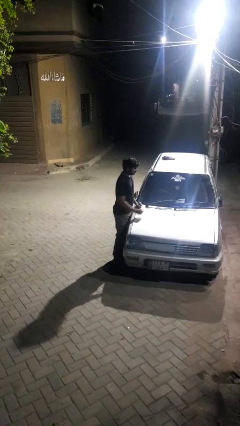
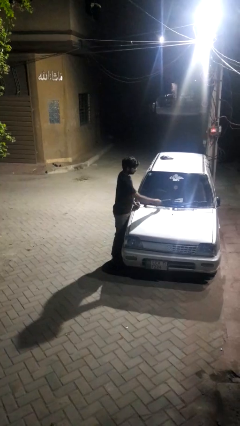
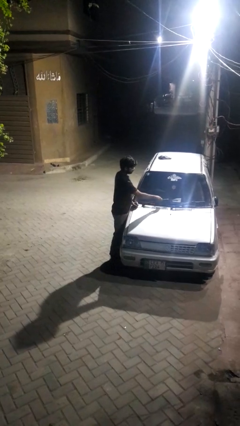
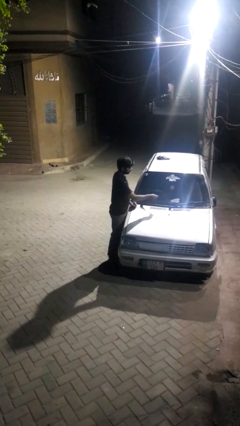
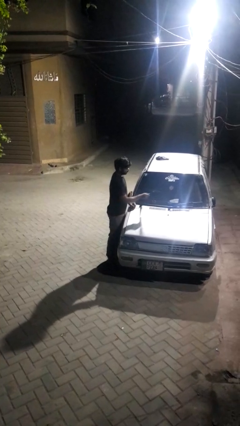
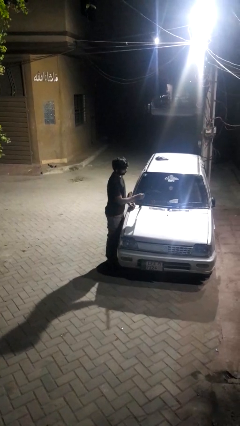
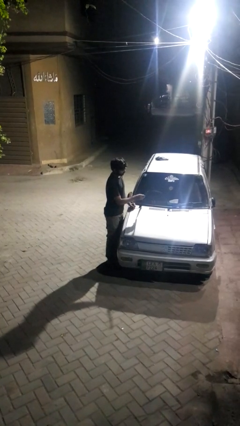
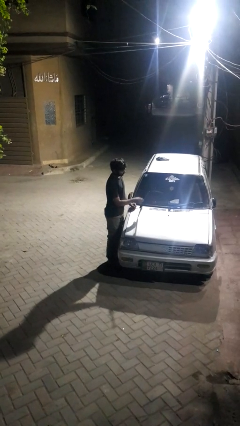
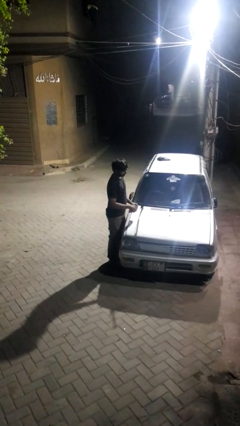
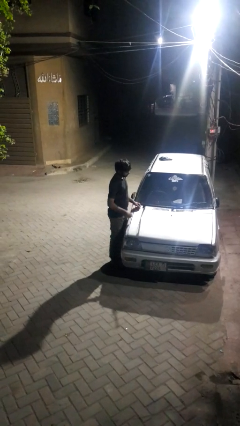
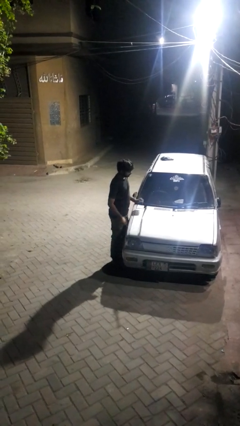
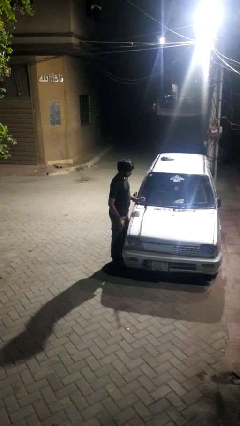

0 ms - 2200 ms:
person flips up car wipers

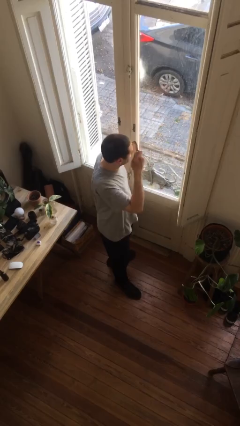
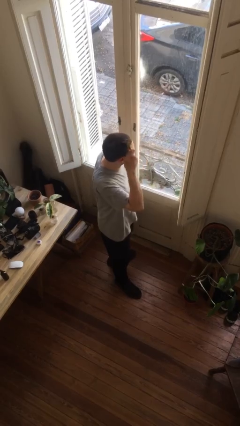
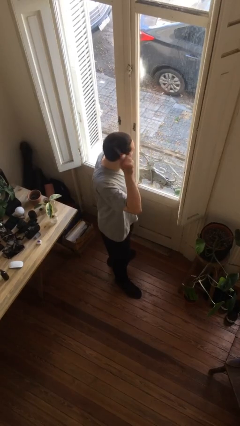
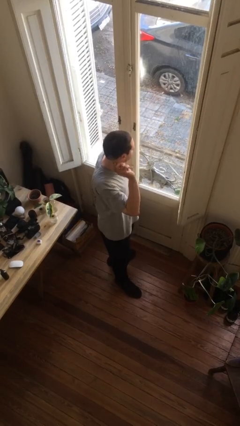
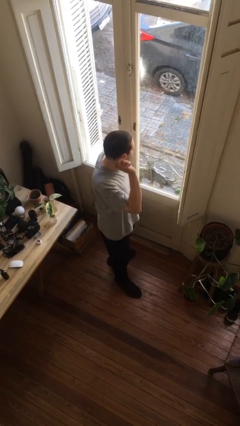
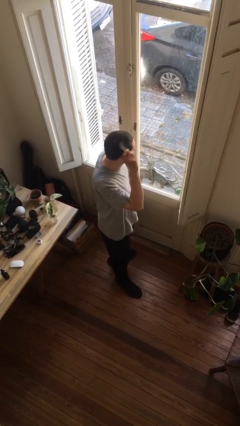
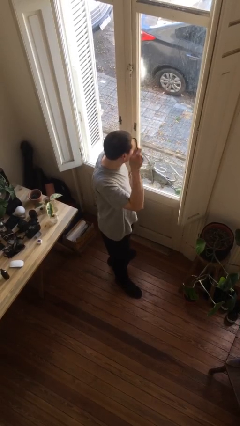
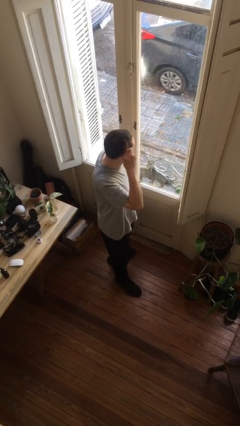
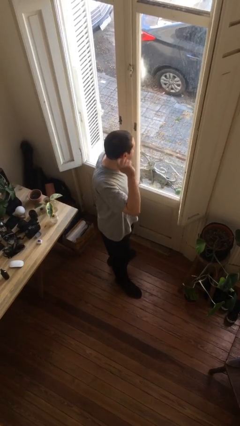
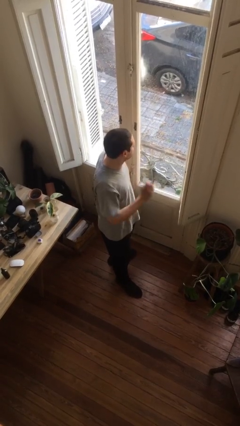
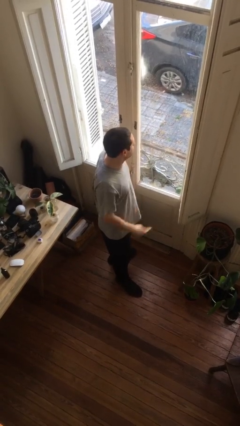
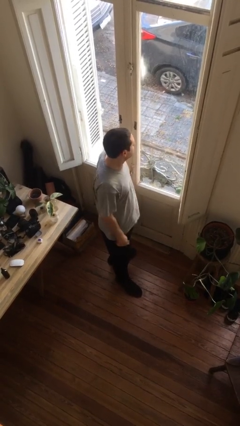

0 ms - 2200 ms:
person brushes hair

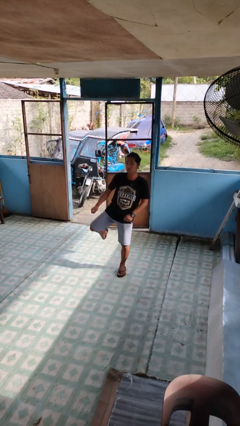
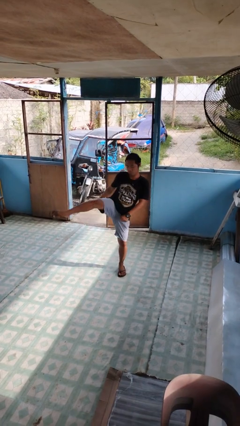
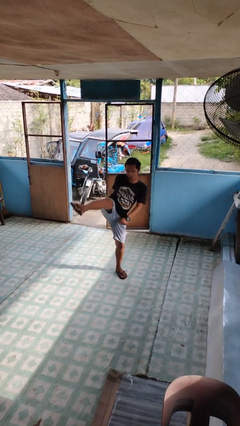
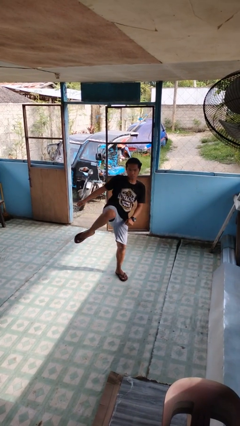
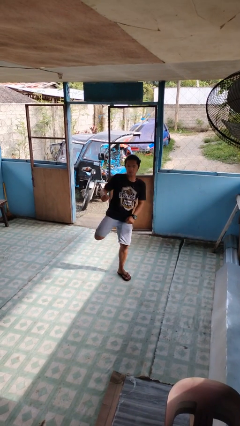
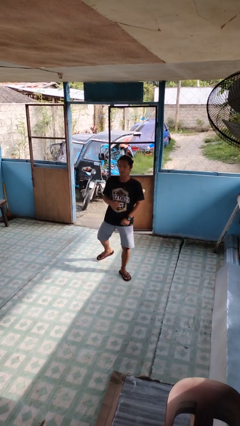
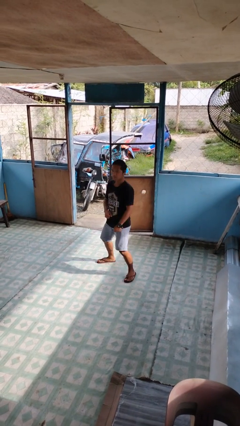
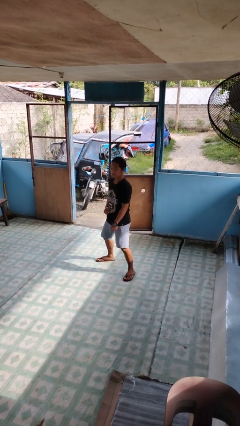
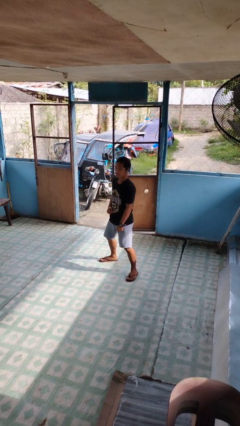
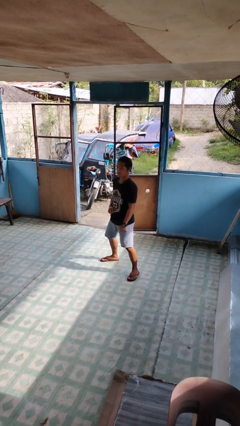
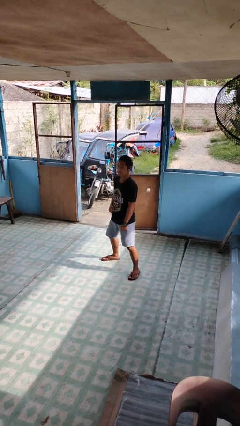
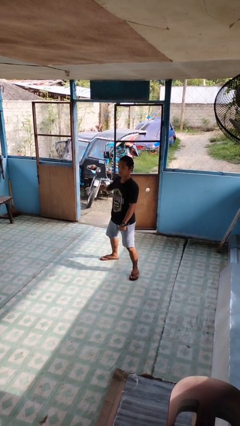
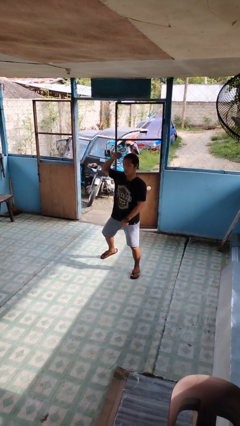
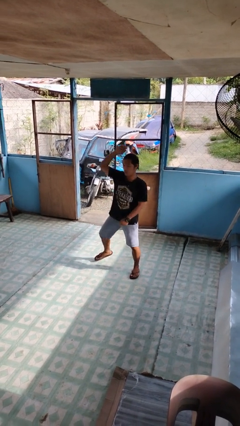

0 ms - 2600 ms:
person karate kicks

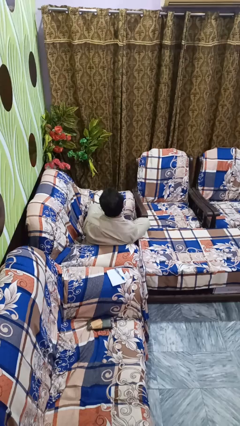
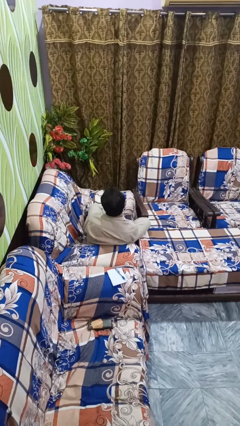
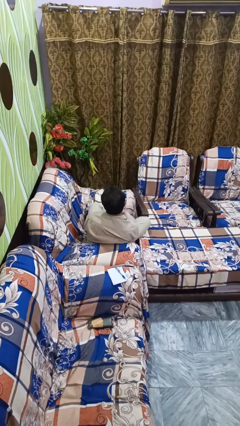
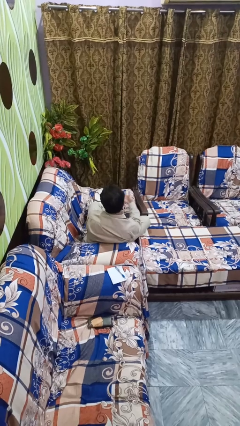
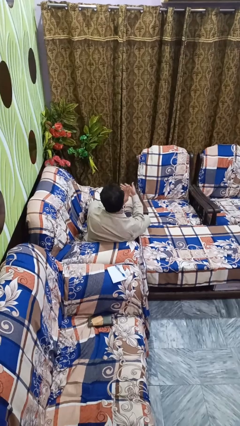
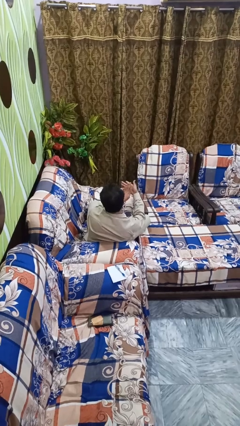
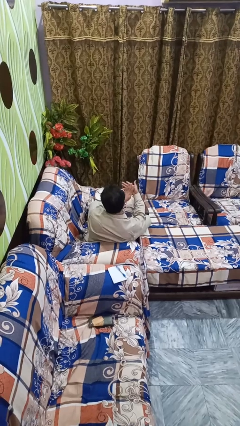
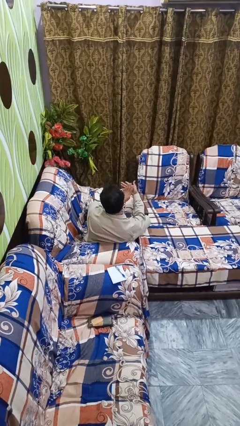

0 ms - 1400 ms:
person gestures number four

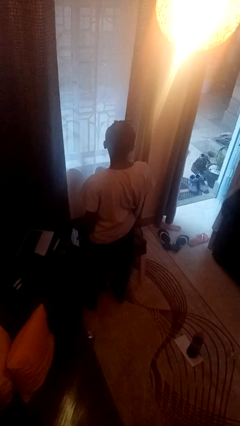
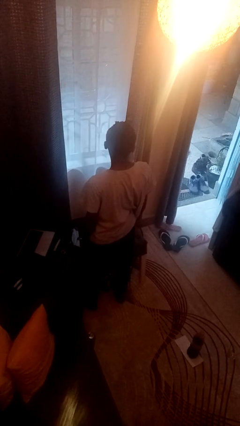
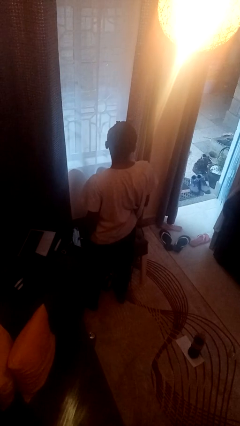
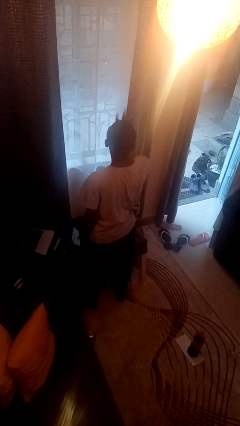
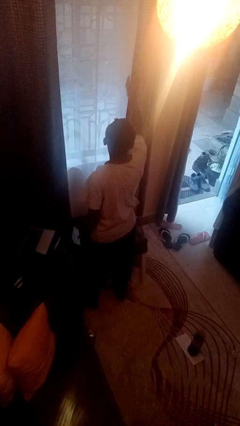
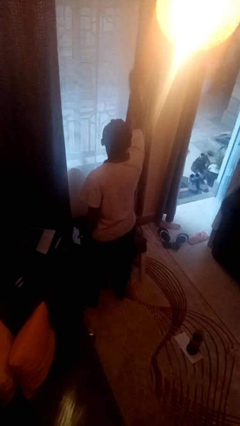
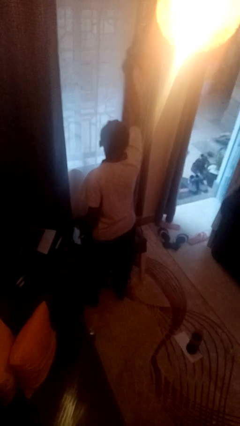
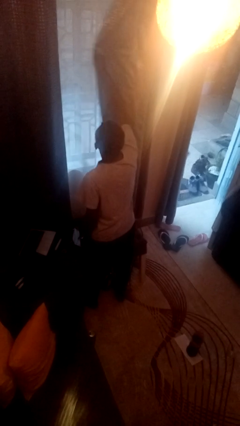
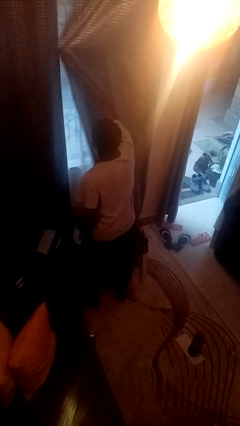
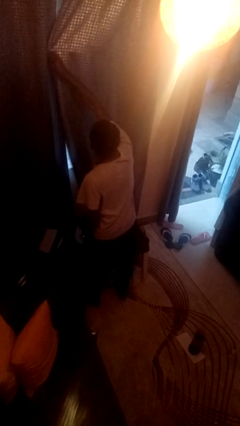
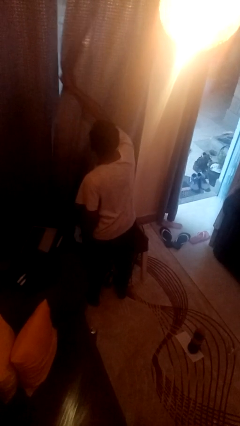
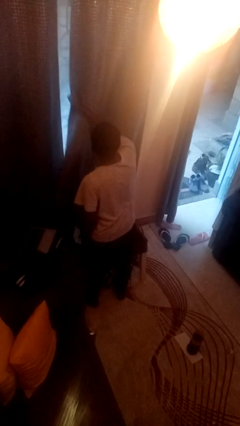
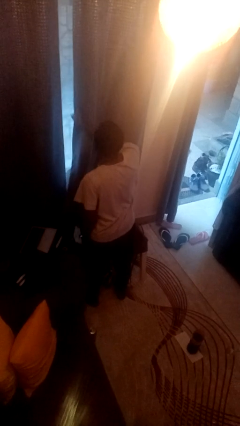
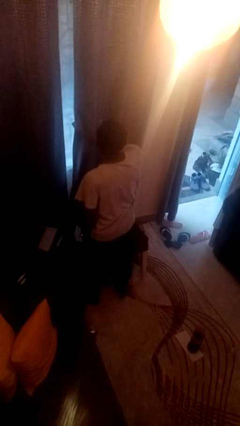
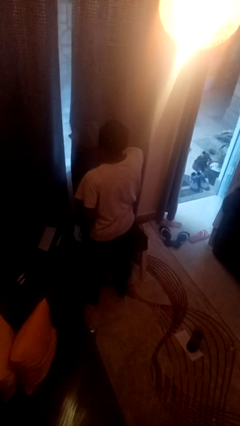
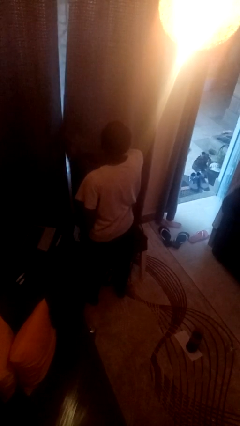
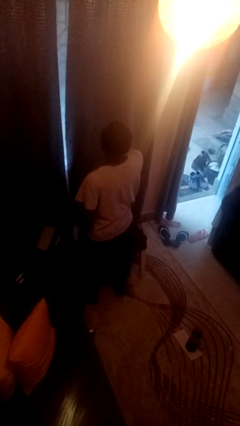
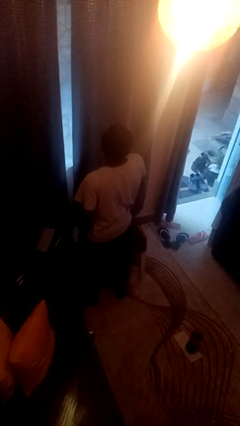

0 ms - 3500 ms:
person closes curtains

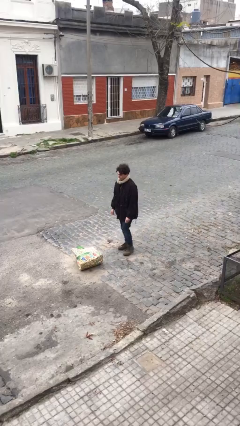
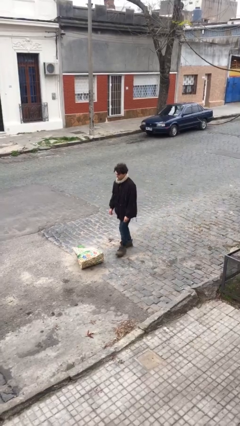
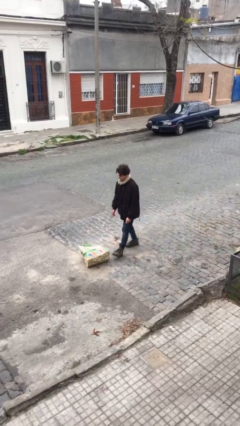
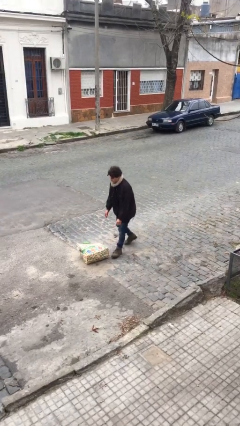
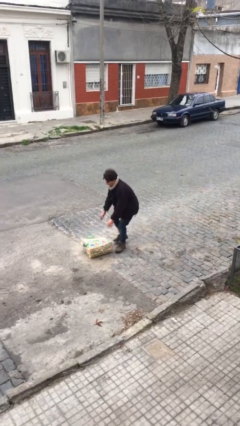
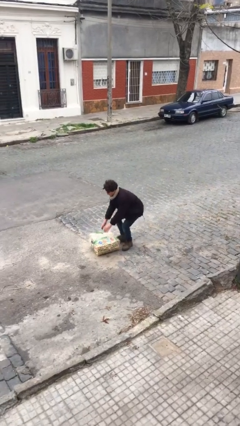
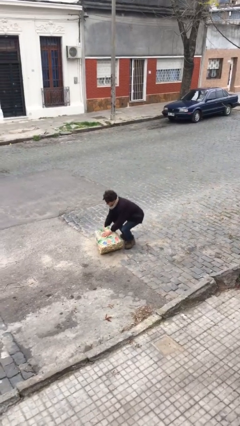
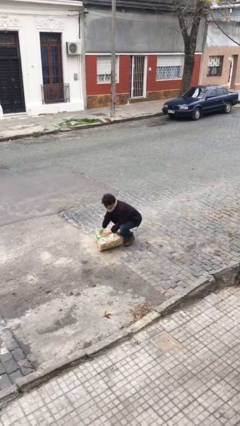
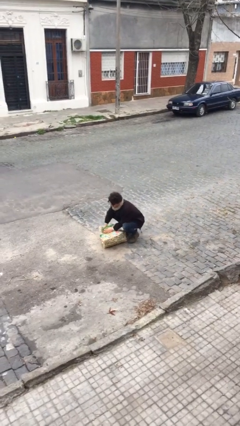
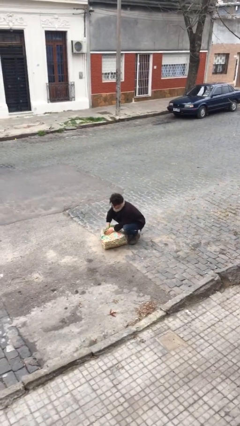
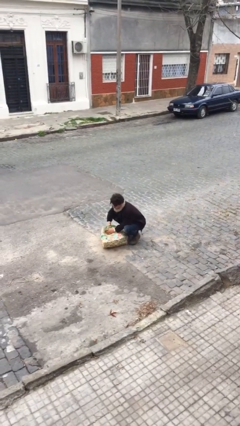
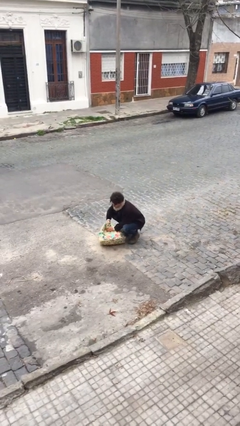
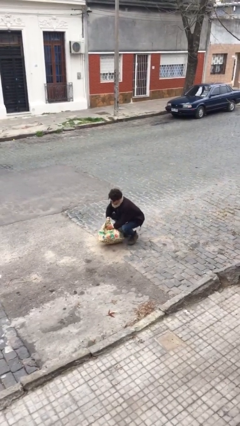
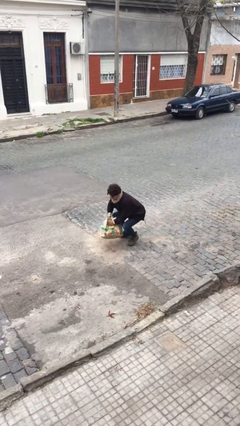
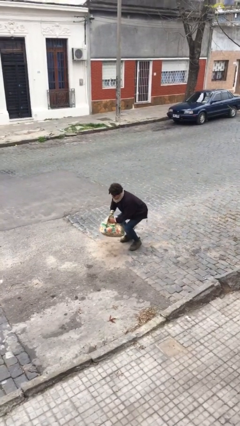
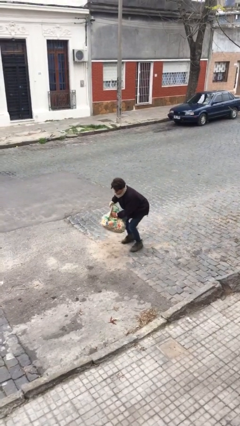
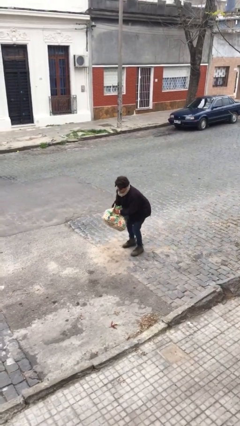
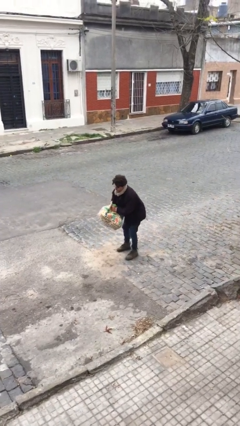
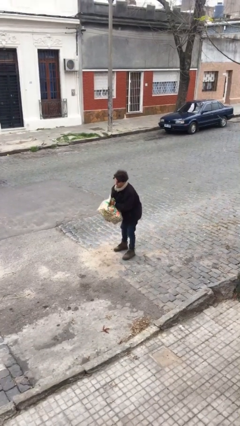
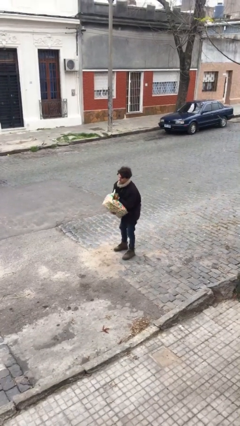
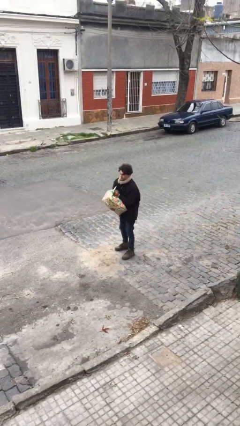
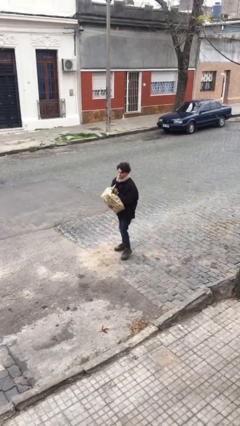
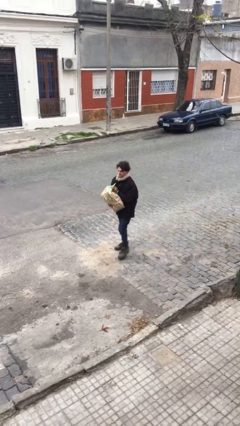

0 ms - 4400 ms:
person picks up object from floor

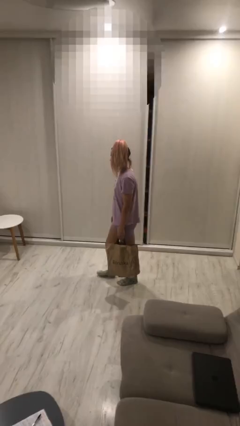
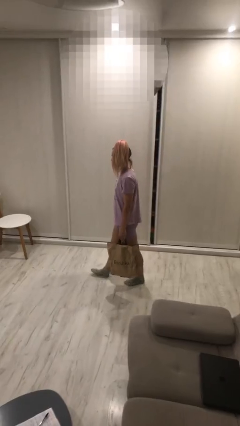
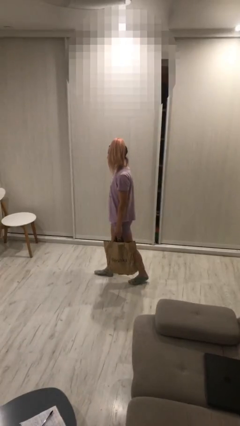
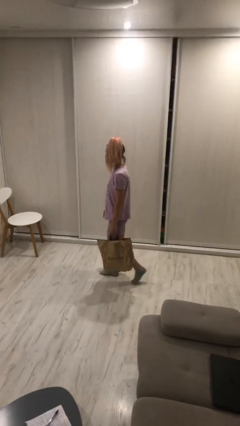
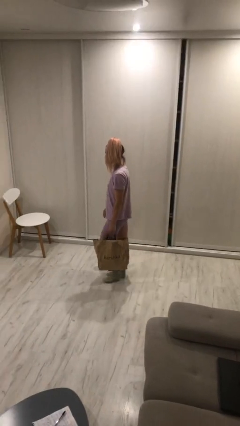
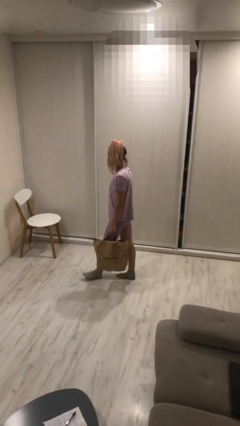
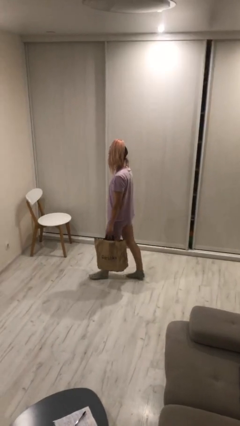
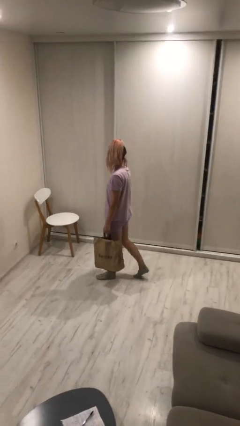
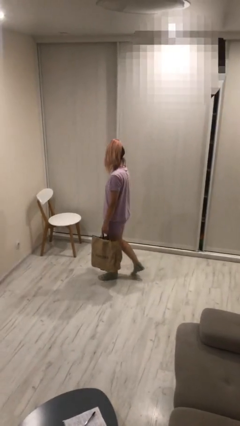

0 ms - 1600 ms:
person carries groceries
